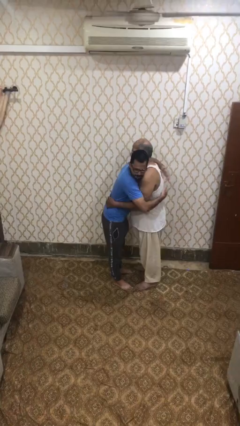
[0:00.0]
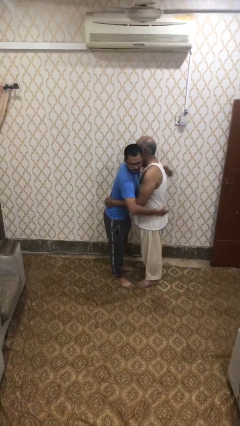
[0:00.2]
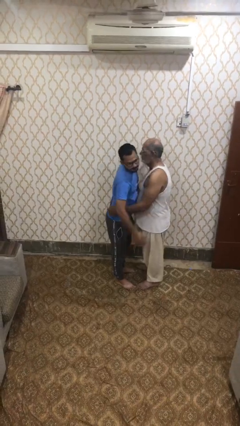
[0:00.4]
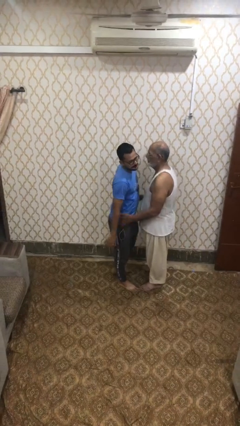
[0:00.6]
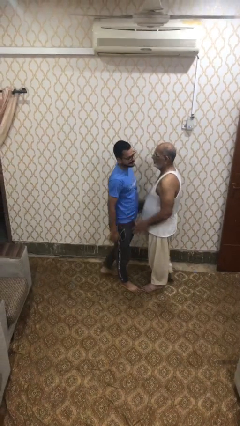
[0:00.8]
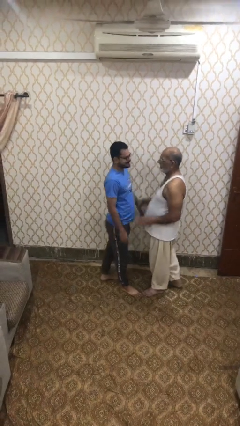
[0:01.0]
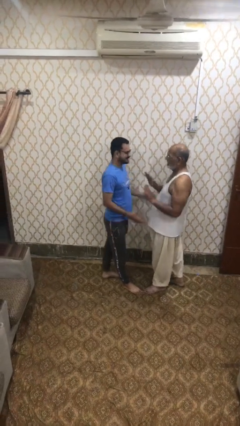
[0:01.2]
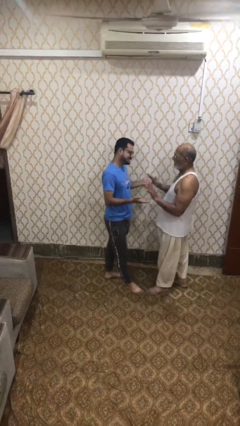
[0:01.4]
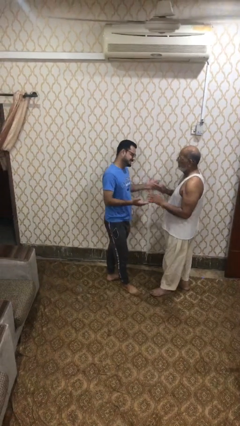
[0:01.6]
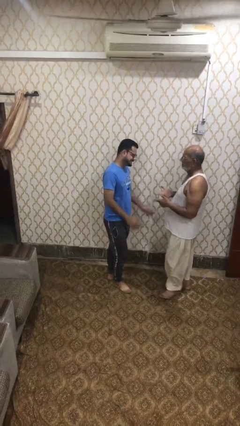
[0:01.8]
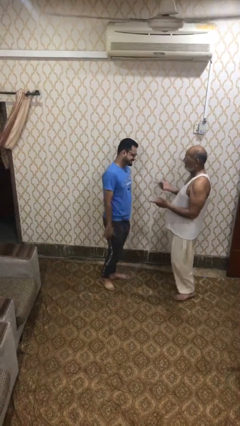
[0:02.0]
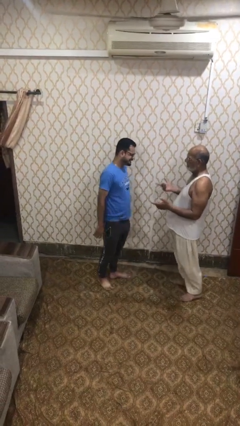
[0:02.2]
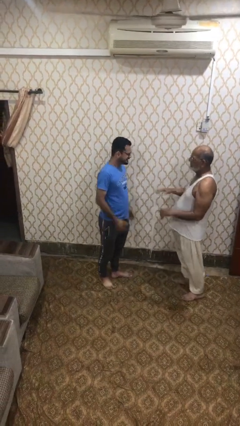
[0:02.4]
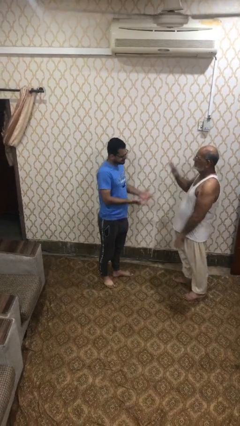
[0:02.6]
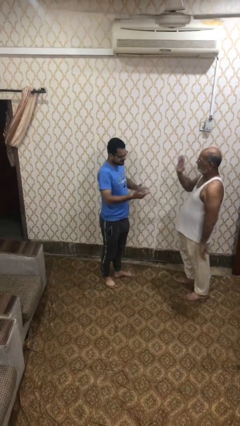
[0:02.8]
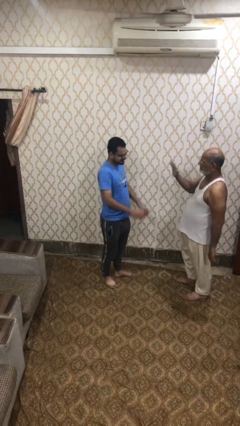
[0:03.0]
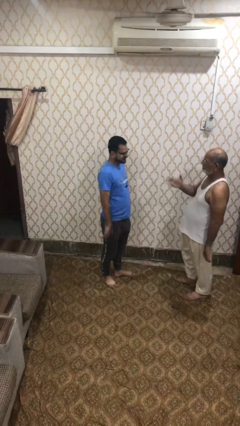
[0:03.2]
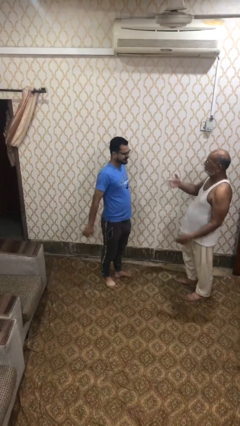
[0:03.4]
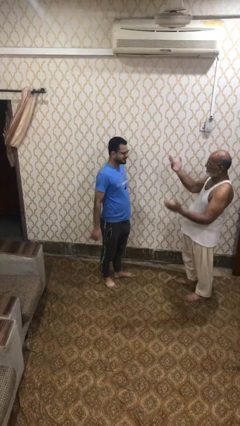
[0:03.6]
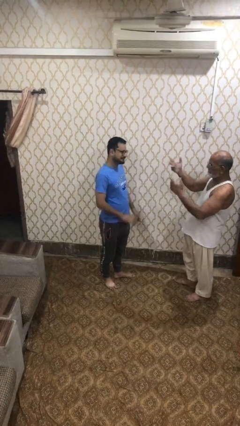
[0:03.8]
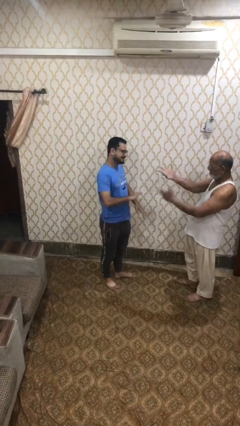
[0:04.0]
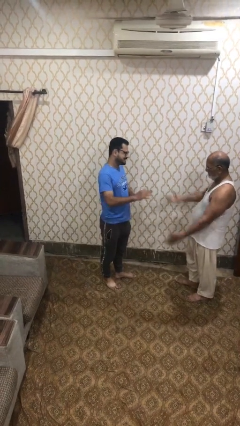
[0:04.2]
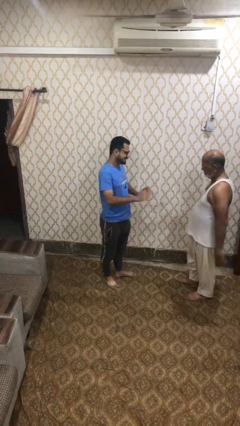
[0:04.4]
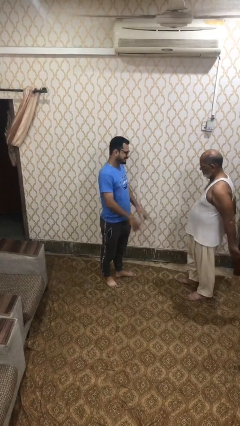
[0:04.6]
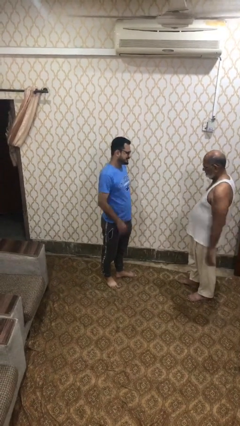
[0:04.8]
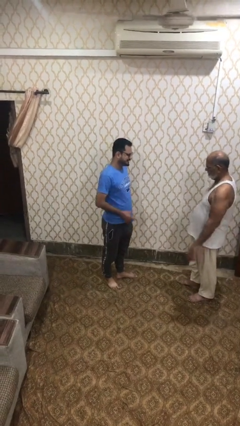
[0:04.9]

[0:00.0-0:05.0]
person talks to person

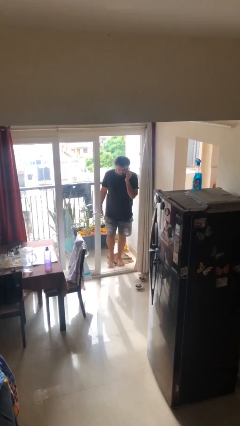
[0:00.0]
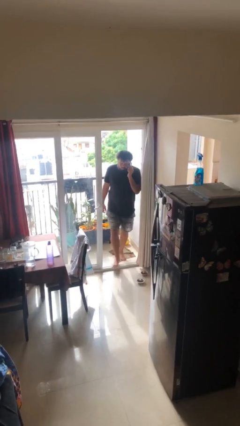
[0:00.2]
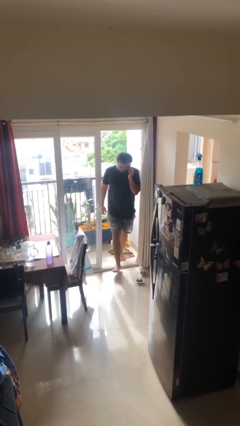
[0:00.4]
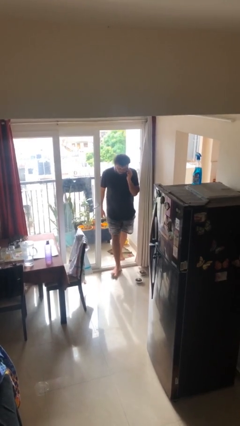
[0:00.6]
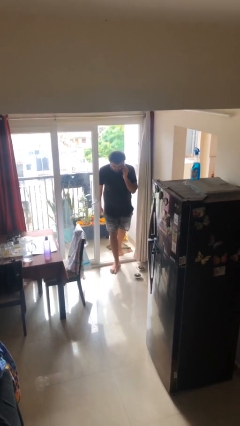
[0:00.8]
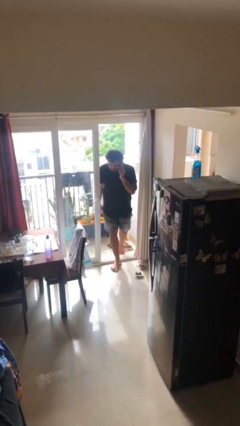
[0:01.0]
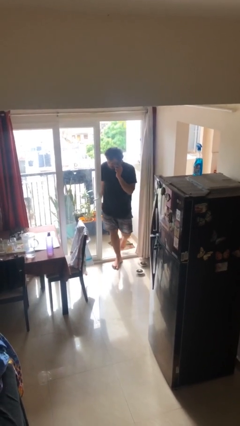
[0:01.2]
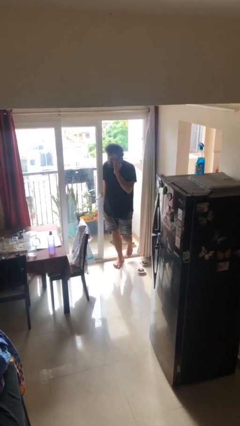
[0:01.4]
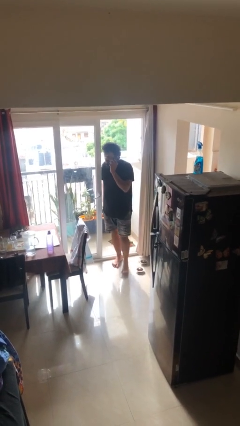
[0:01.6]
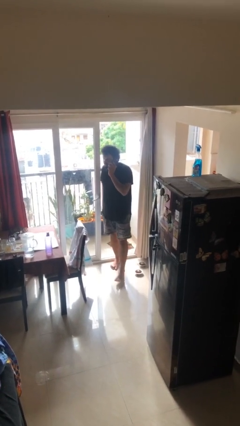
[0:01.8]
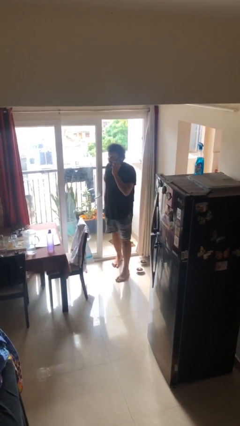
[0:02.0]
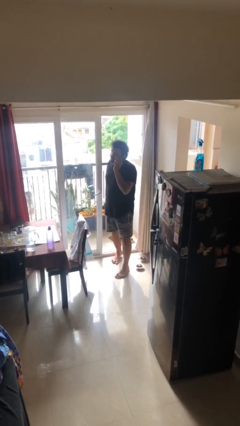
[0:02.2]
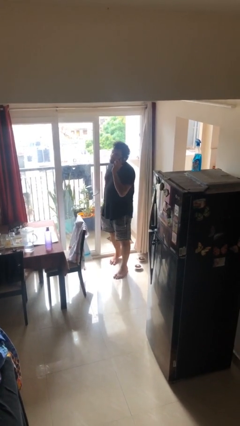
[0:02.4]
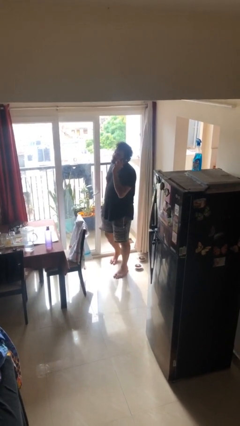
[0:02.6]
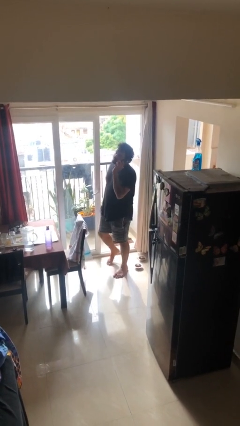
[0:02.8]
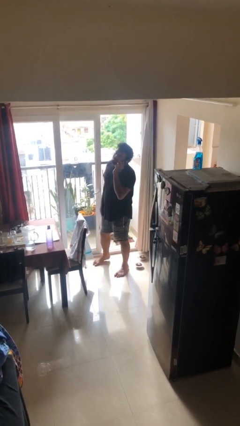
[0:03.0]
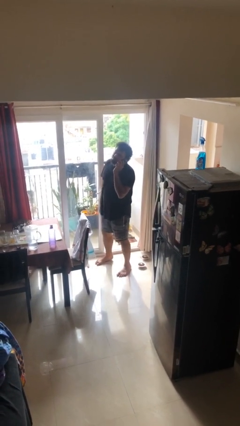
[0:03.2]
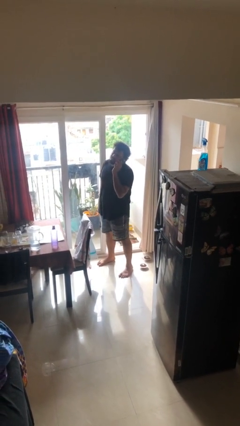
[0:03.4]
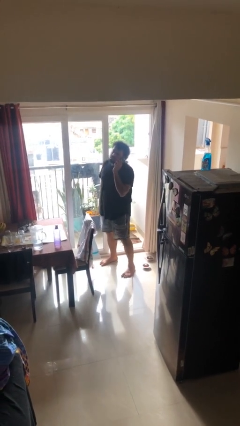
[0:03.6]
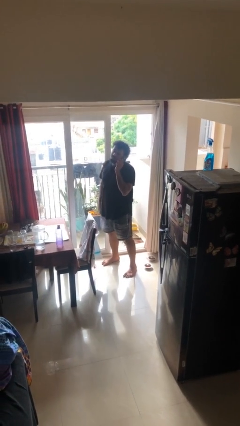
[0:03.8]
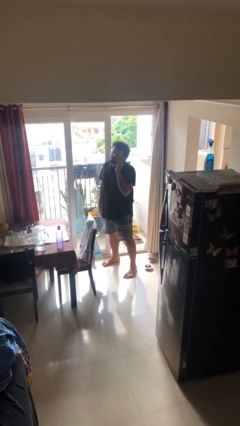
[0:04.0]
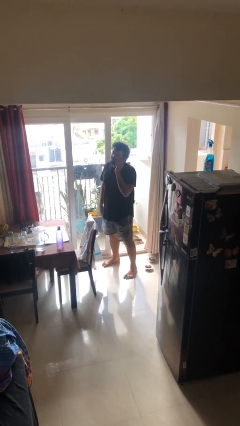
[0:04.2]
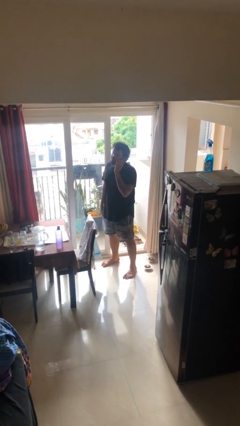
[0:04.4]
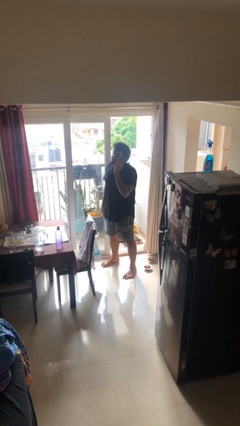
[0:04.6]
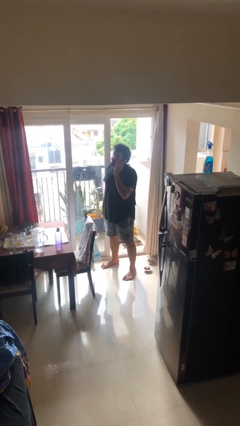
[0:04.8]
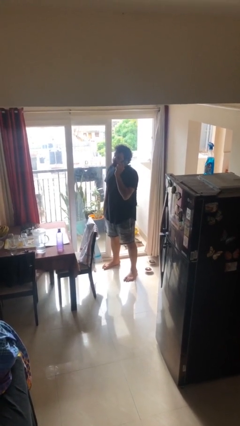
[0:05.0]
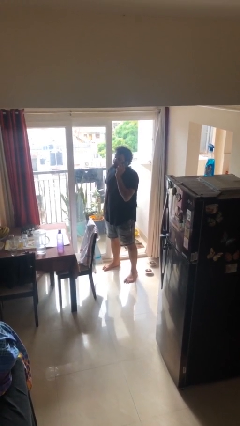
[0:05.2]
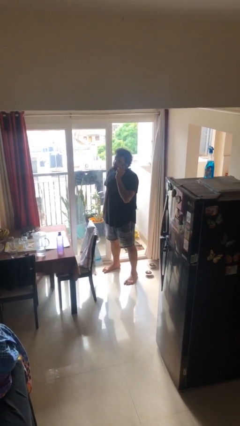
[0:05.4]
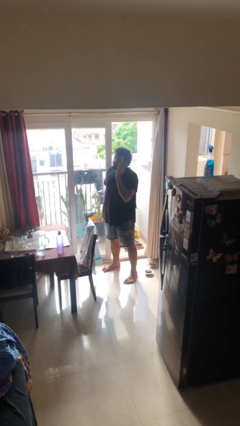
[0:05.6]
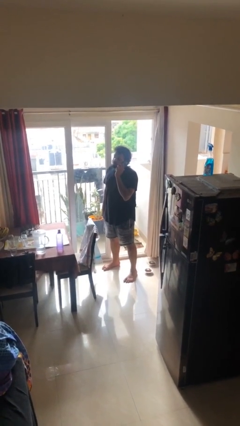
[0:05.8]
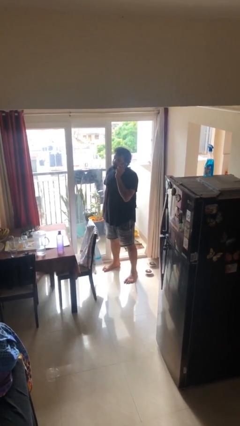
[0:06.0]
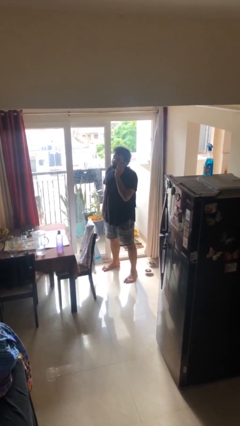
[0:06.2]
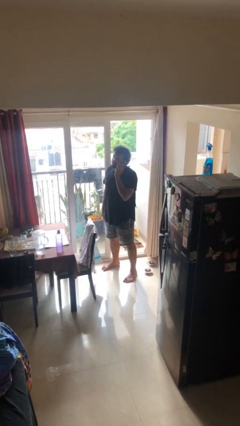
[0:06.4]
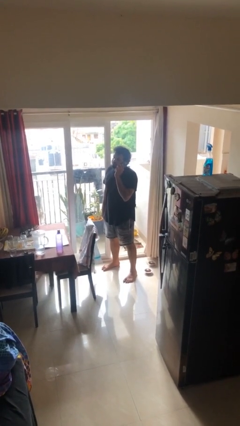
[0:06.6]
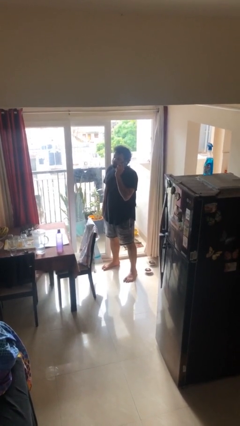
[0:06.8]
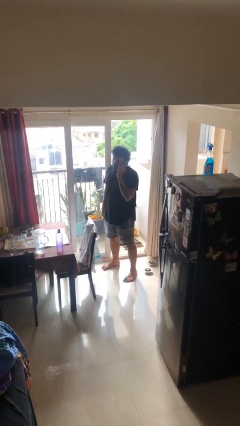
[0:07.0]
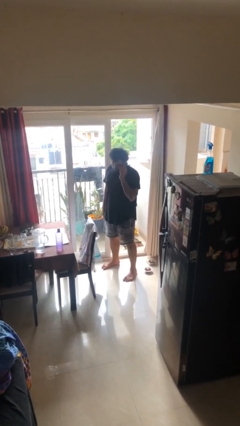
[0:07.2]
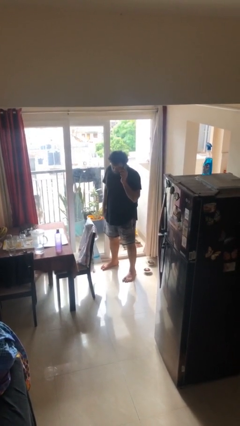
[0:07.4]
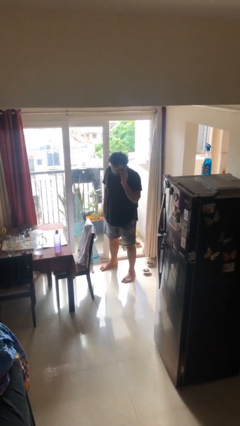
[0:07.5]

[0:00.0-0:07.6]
person enters scene through structure

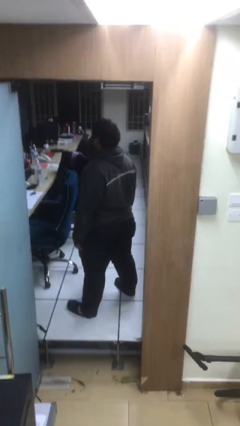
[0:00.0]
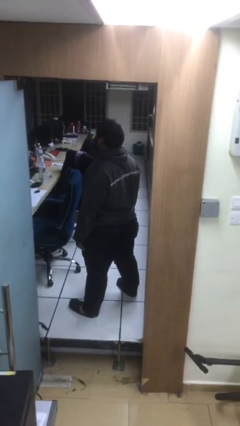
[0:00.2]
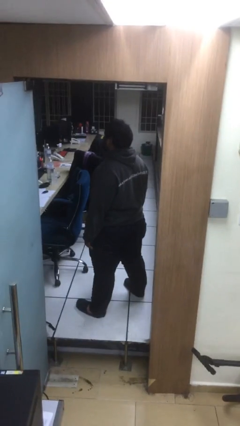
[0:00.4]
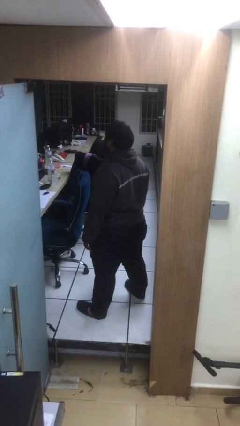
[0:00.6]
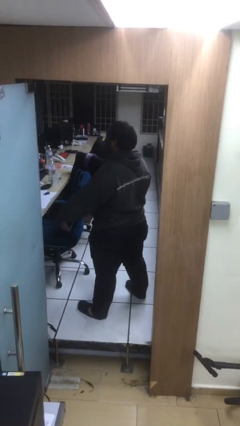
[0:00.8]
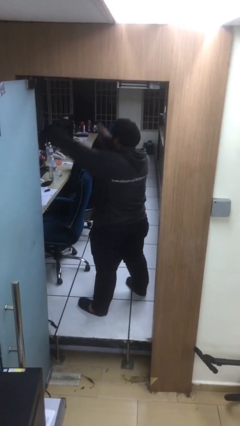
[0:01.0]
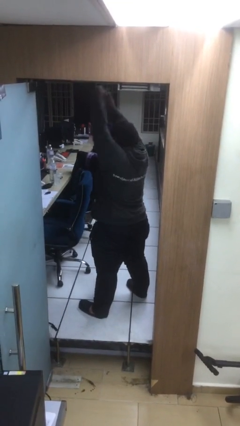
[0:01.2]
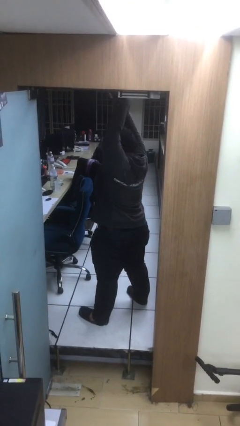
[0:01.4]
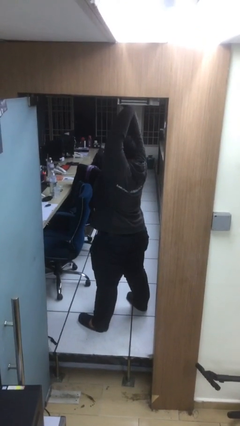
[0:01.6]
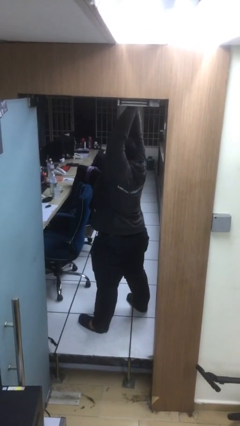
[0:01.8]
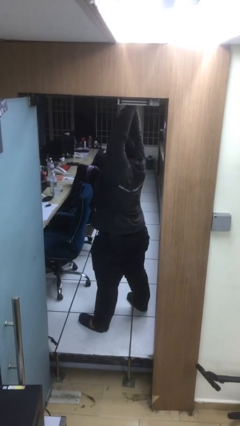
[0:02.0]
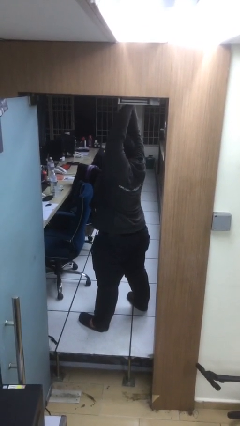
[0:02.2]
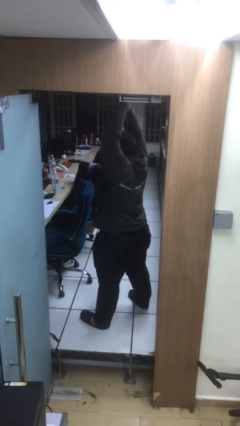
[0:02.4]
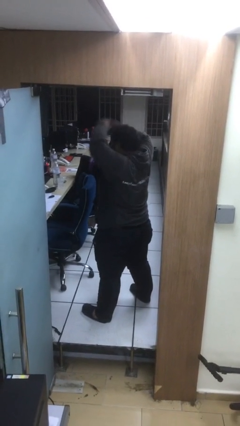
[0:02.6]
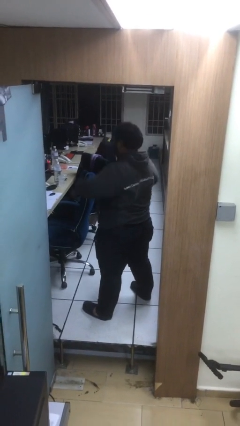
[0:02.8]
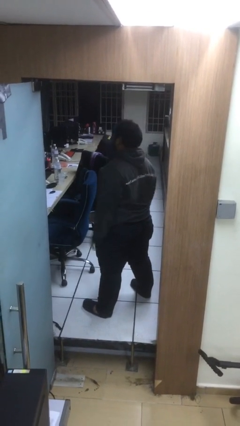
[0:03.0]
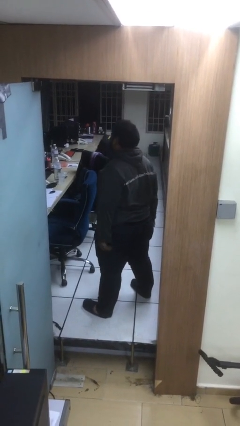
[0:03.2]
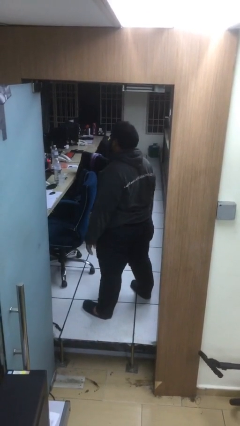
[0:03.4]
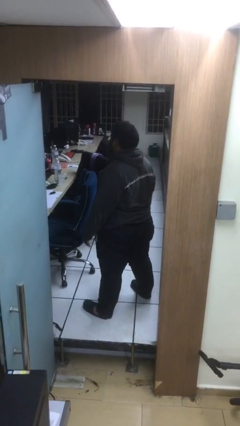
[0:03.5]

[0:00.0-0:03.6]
person stretches arms over head

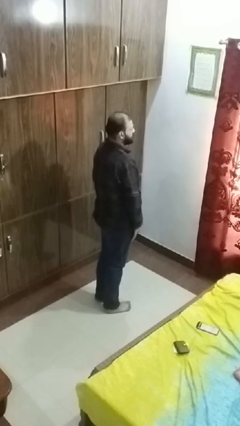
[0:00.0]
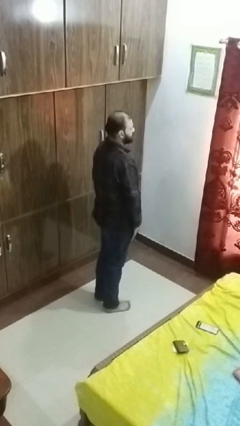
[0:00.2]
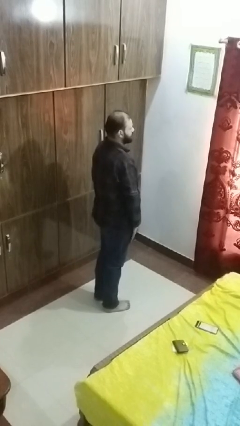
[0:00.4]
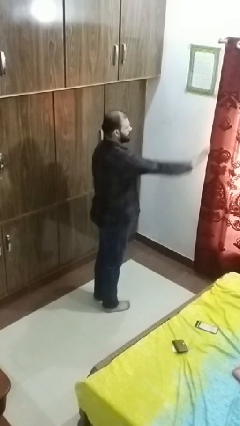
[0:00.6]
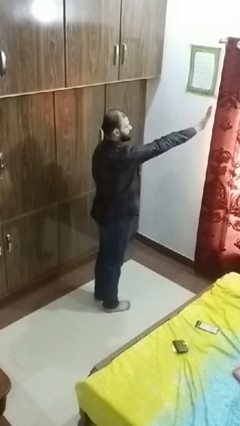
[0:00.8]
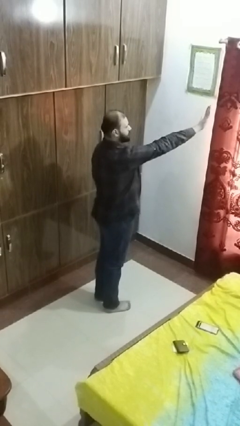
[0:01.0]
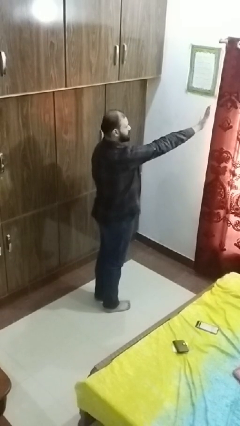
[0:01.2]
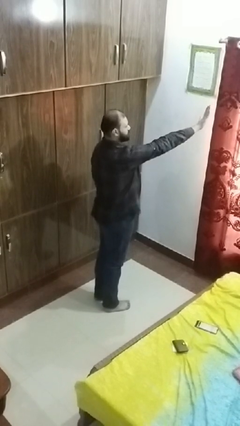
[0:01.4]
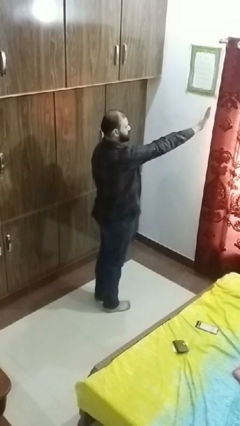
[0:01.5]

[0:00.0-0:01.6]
person gestures stop

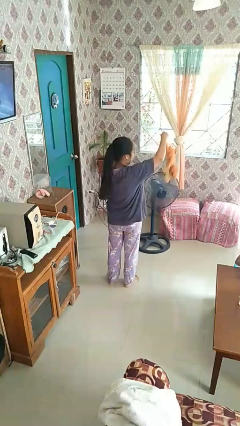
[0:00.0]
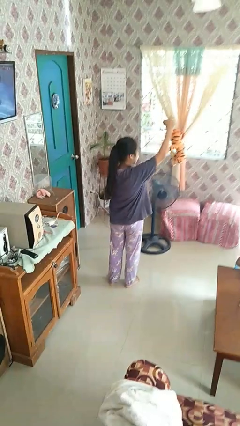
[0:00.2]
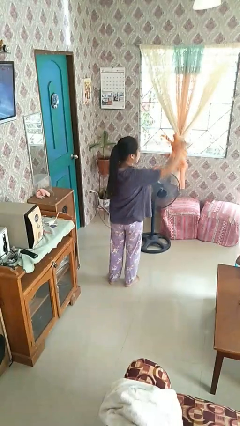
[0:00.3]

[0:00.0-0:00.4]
person drops object
